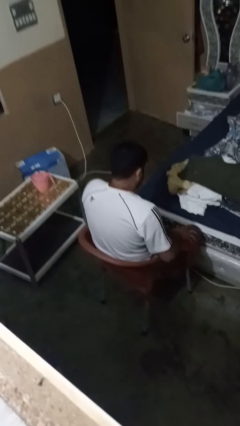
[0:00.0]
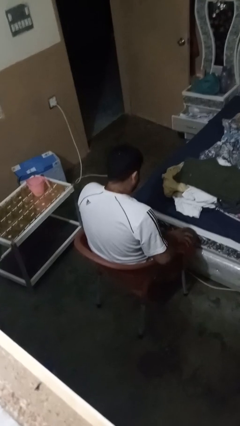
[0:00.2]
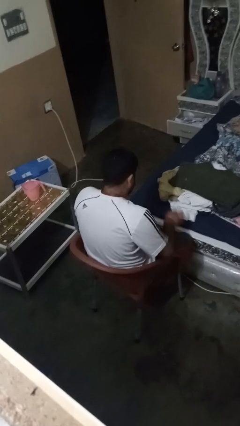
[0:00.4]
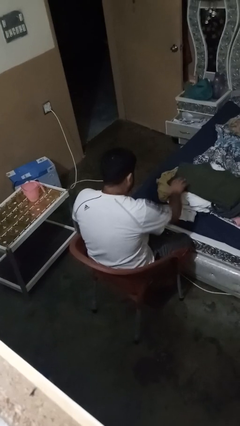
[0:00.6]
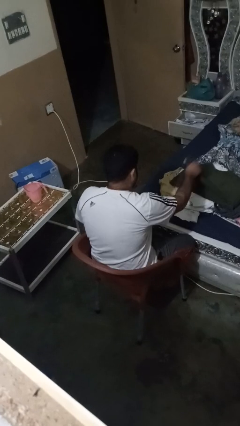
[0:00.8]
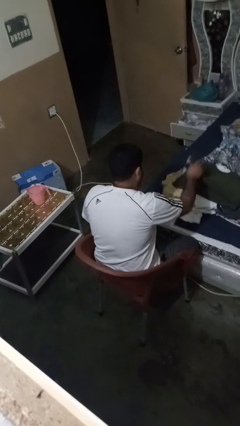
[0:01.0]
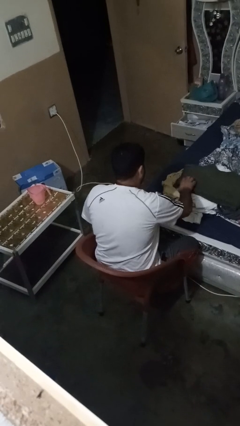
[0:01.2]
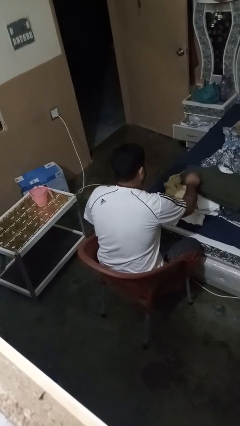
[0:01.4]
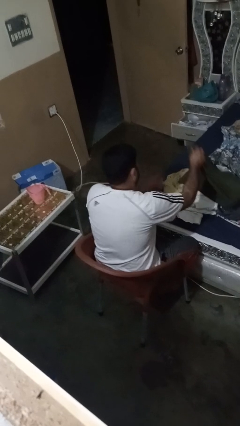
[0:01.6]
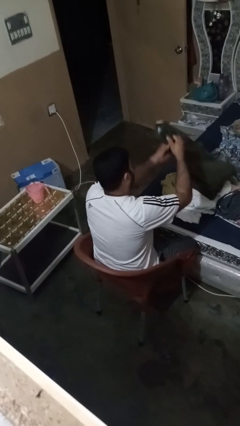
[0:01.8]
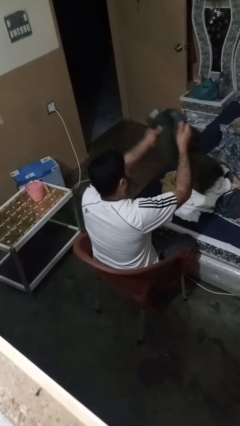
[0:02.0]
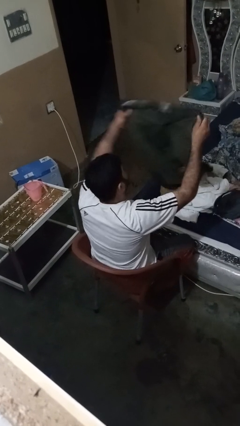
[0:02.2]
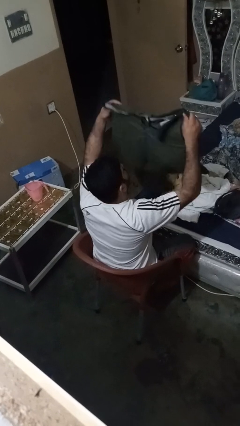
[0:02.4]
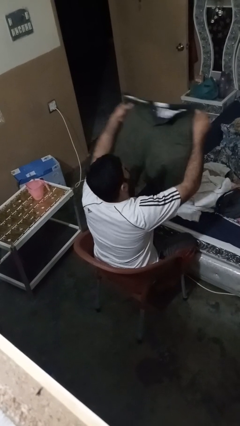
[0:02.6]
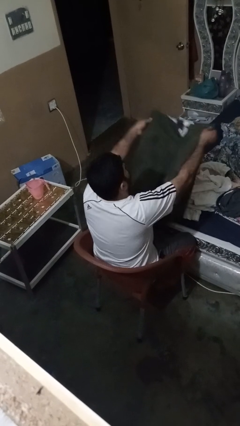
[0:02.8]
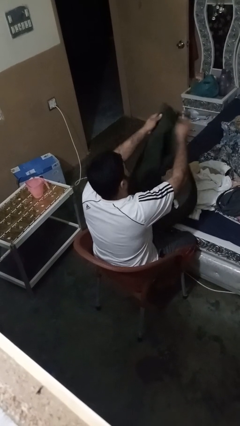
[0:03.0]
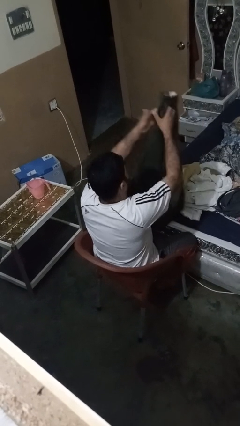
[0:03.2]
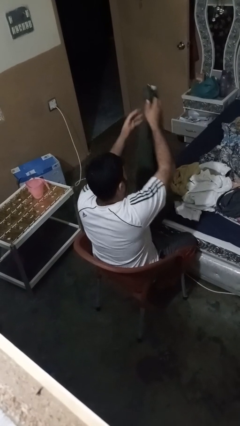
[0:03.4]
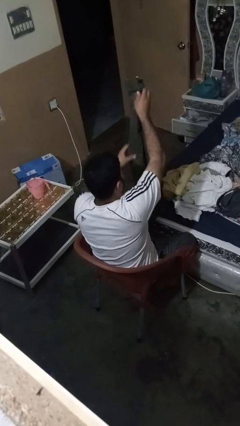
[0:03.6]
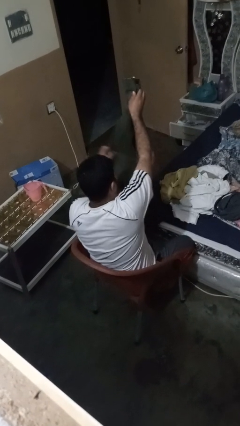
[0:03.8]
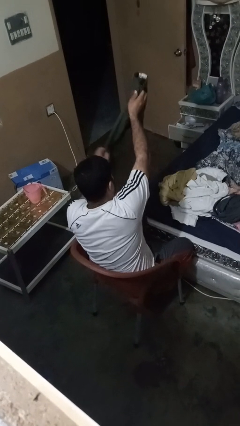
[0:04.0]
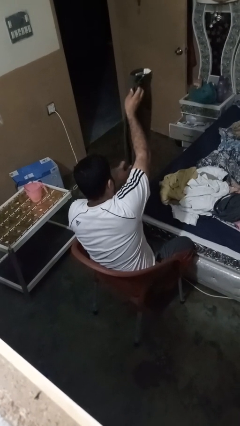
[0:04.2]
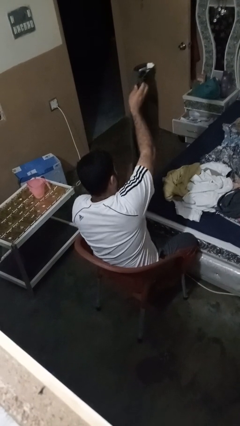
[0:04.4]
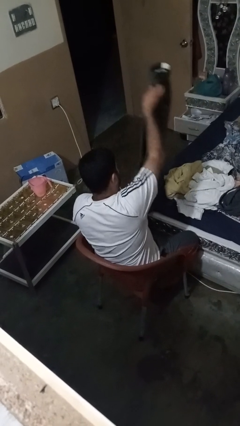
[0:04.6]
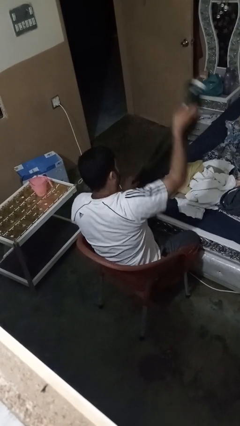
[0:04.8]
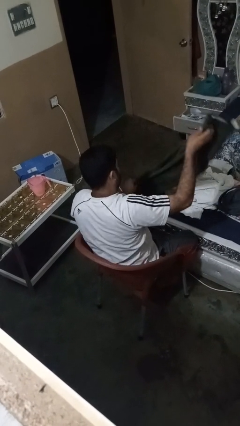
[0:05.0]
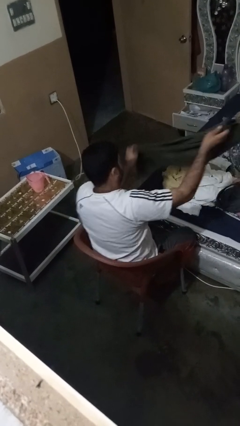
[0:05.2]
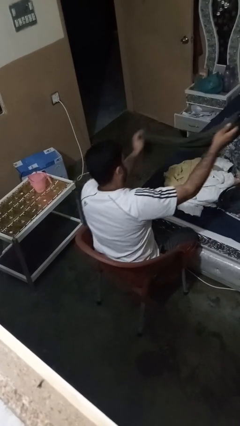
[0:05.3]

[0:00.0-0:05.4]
person folds pants

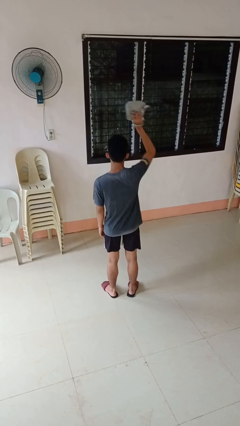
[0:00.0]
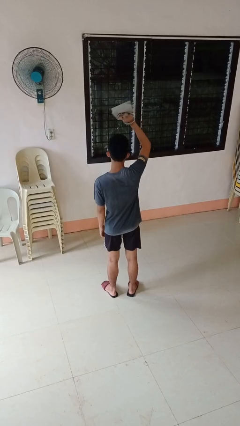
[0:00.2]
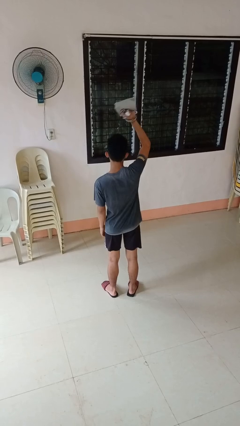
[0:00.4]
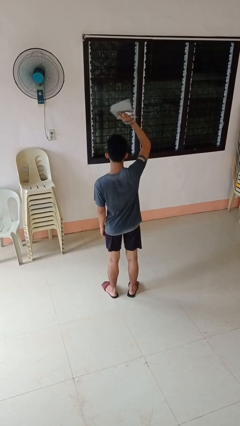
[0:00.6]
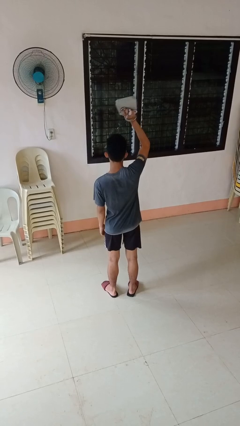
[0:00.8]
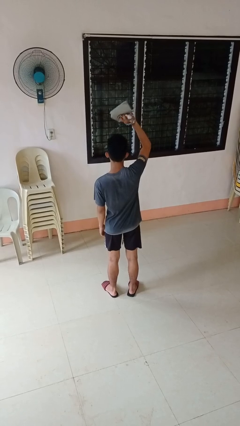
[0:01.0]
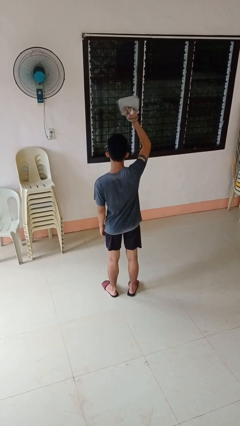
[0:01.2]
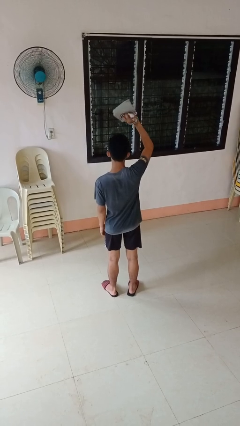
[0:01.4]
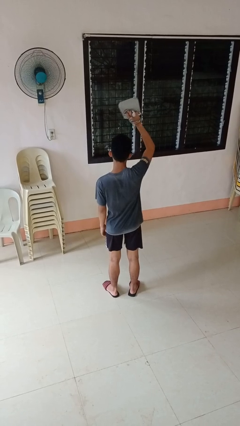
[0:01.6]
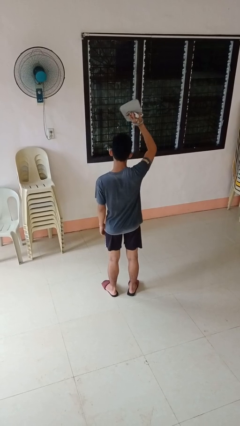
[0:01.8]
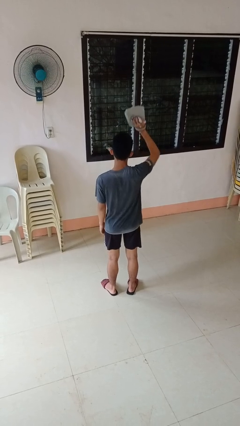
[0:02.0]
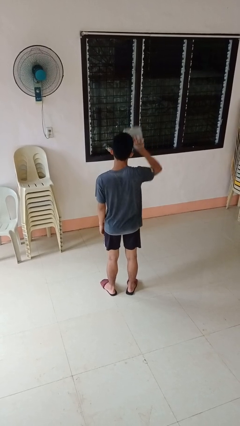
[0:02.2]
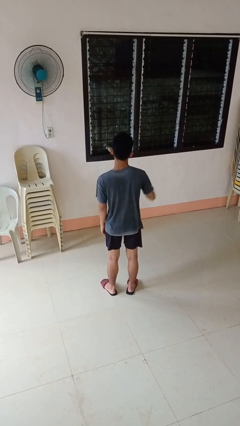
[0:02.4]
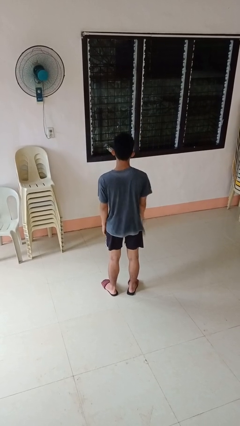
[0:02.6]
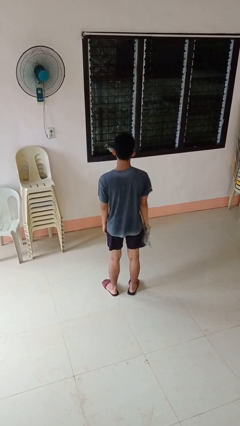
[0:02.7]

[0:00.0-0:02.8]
person holds object above head

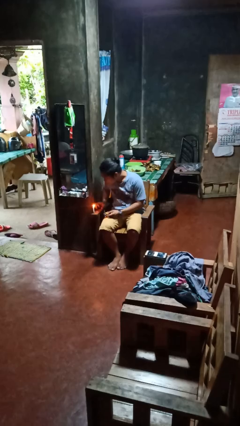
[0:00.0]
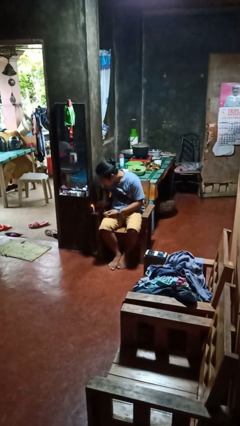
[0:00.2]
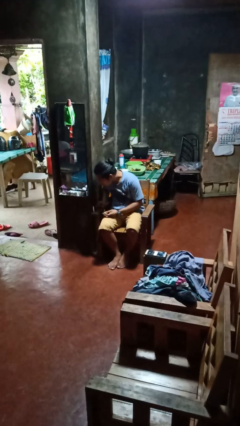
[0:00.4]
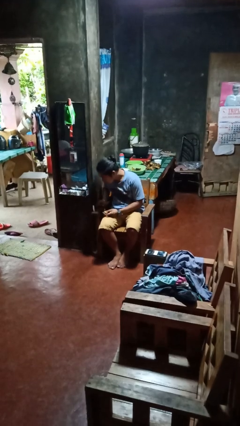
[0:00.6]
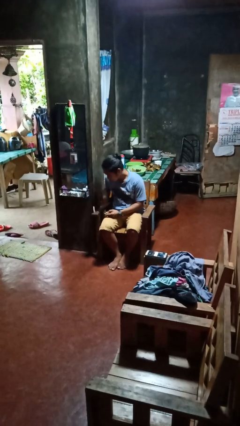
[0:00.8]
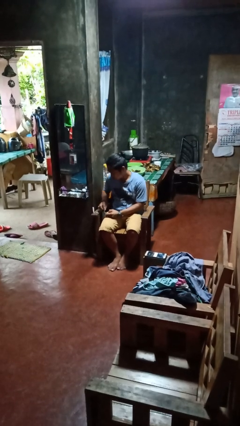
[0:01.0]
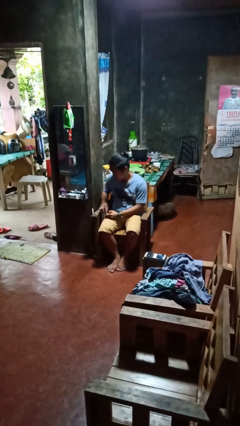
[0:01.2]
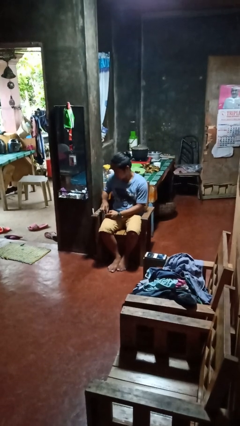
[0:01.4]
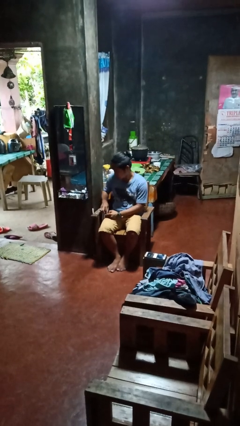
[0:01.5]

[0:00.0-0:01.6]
person extinguishes candle

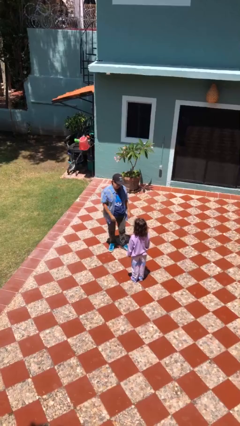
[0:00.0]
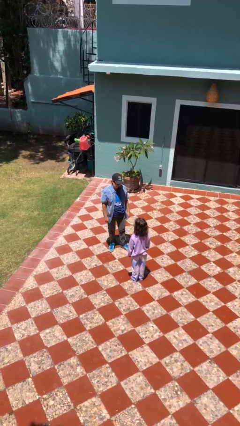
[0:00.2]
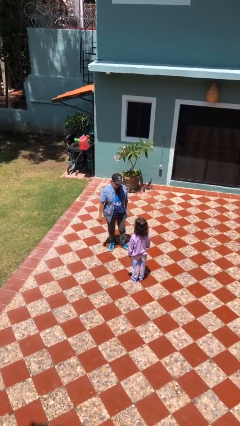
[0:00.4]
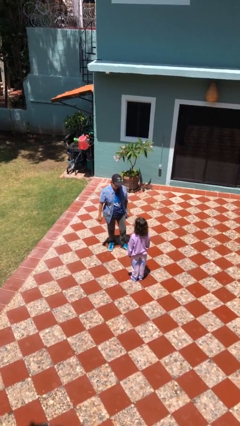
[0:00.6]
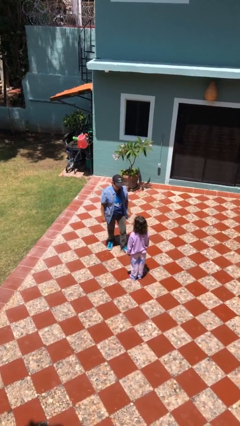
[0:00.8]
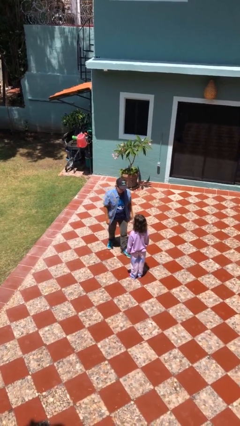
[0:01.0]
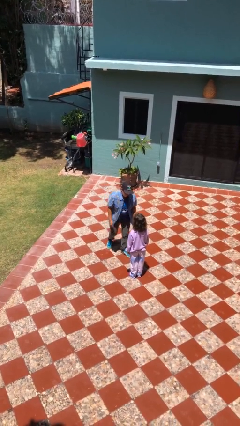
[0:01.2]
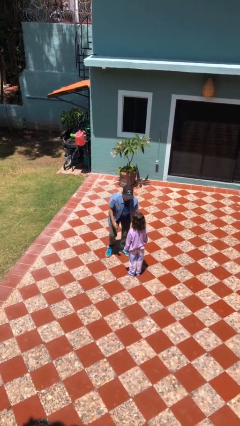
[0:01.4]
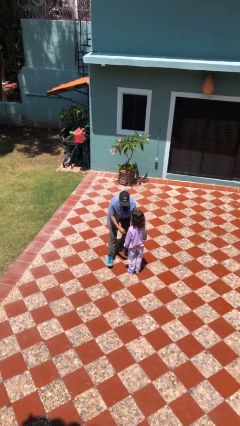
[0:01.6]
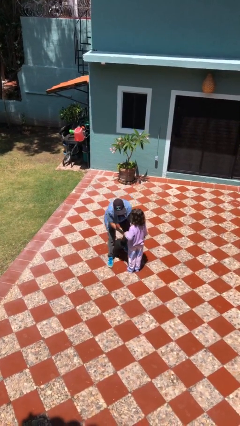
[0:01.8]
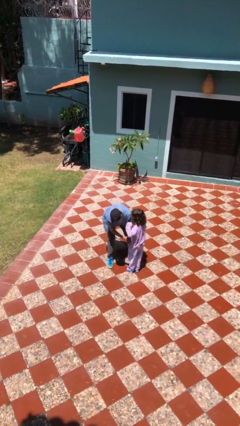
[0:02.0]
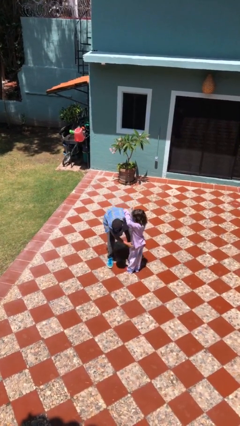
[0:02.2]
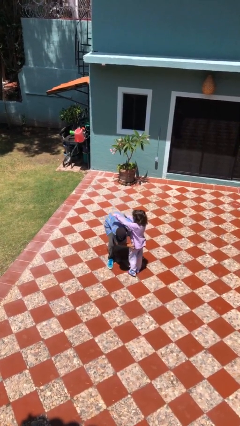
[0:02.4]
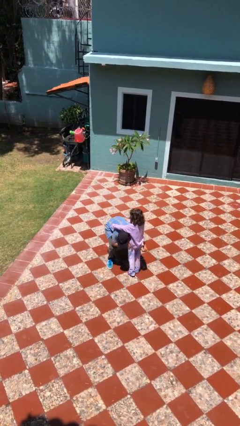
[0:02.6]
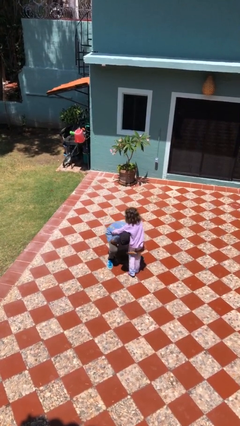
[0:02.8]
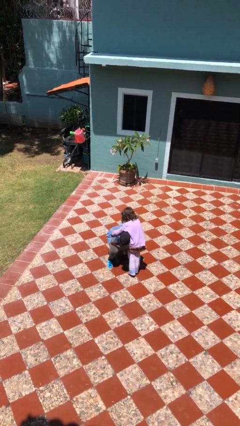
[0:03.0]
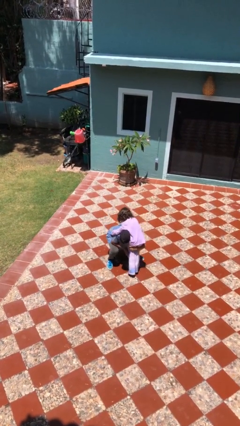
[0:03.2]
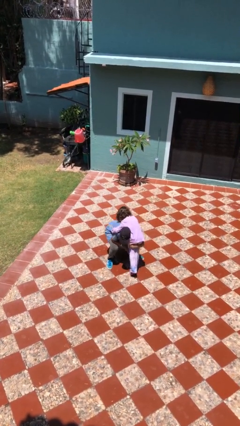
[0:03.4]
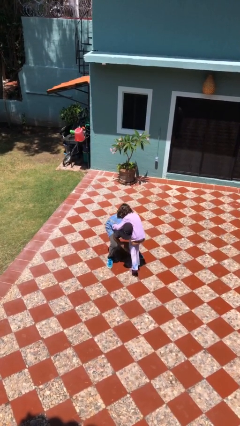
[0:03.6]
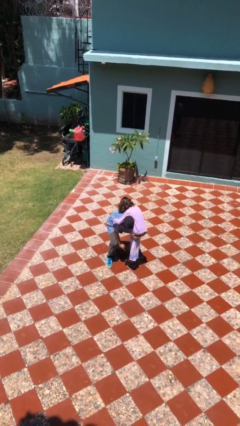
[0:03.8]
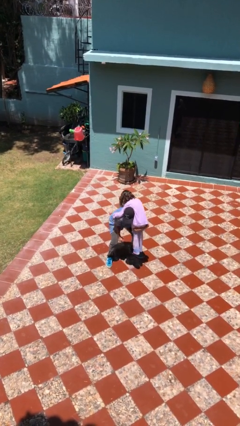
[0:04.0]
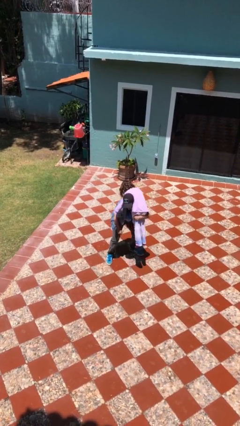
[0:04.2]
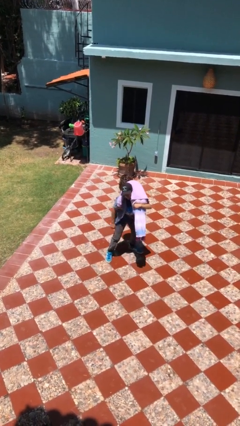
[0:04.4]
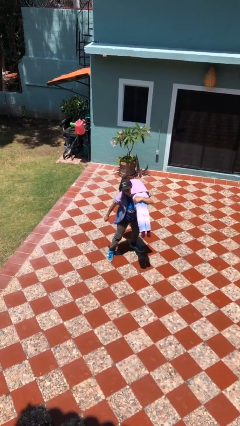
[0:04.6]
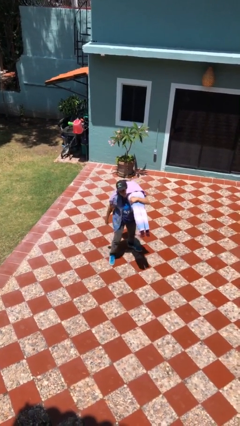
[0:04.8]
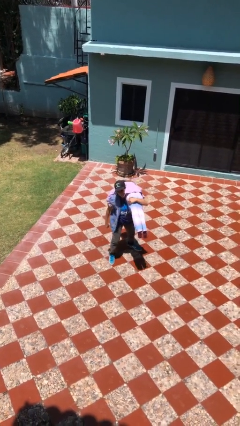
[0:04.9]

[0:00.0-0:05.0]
person carries person over shoulder

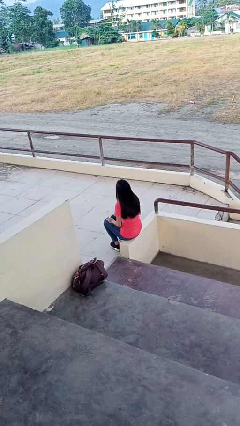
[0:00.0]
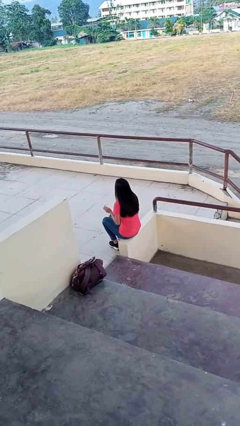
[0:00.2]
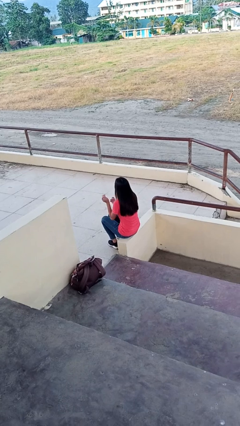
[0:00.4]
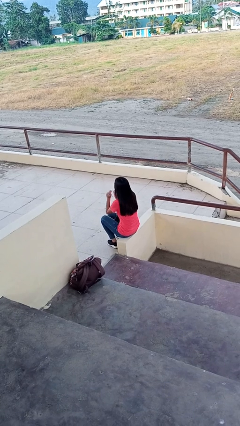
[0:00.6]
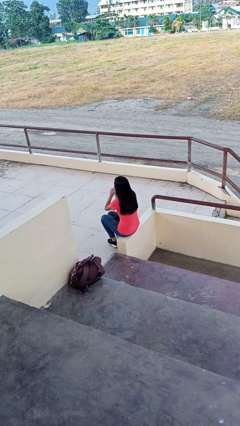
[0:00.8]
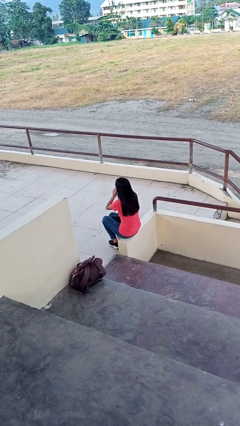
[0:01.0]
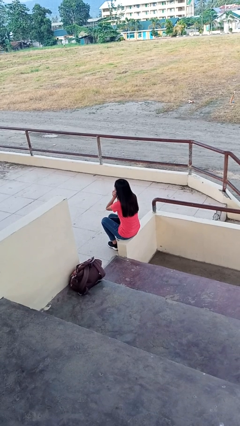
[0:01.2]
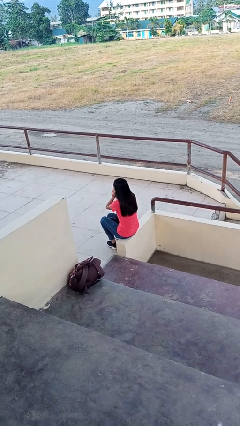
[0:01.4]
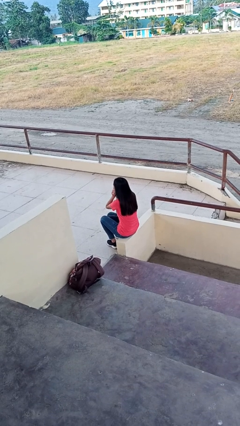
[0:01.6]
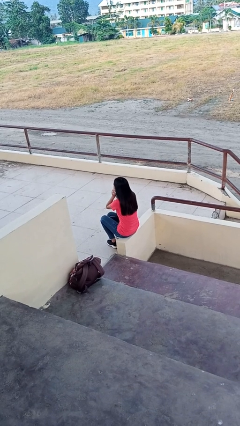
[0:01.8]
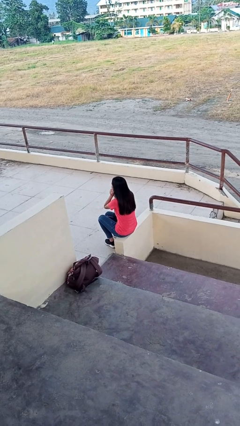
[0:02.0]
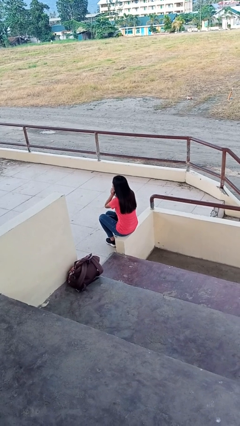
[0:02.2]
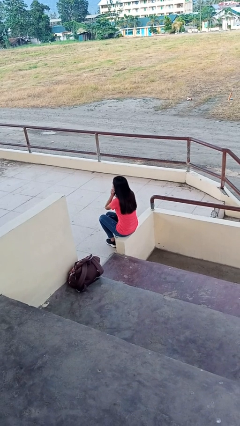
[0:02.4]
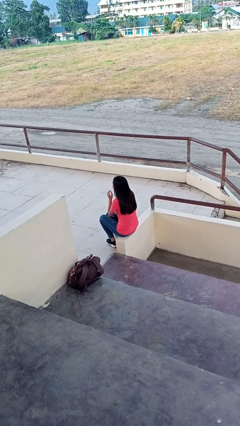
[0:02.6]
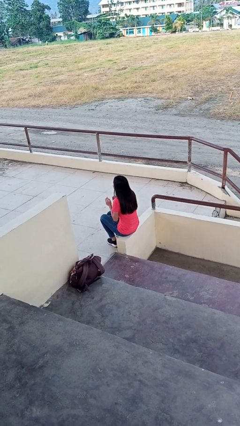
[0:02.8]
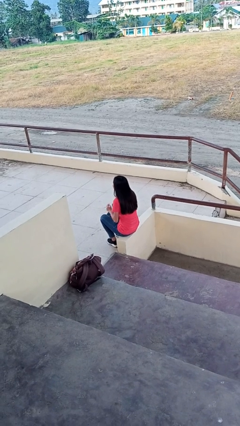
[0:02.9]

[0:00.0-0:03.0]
person puts on headphones
